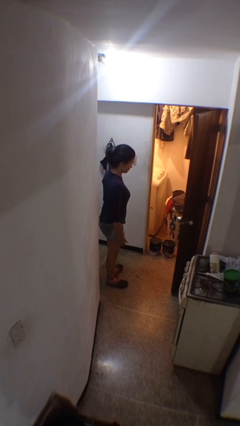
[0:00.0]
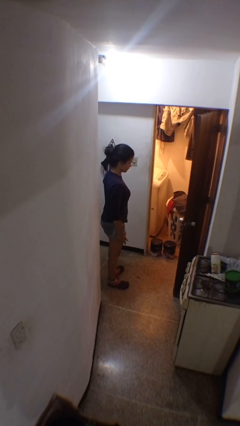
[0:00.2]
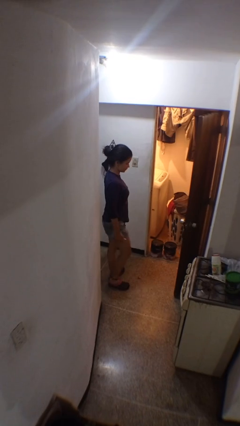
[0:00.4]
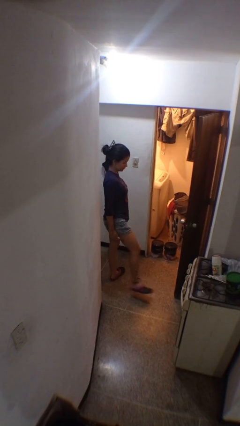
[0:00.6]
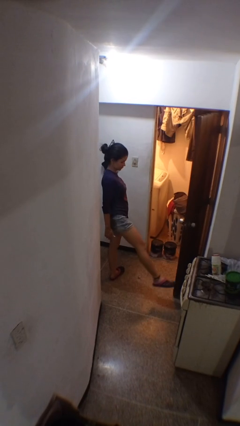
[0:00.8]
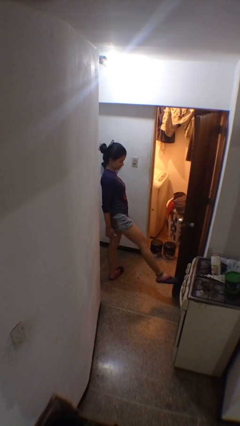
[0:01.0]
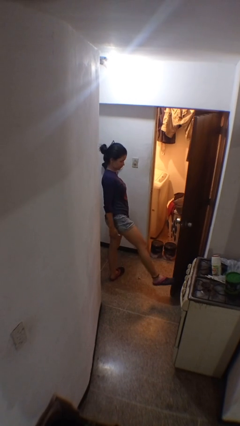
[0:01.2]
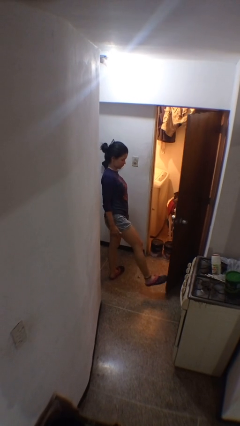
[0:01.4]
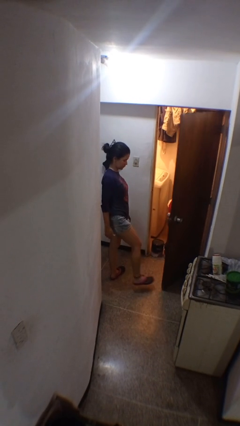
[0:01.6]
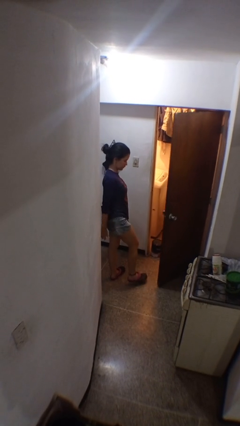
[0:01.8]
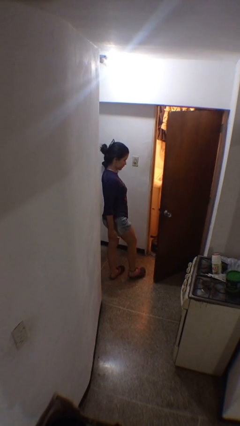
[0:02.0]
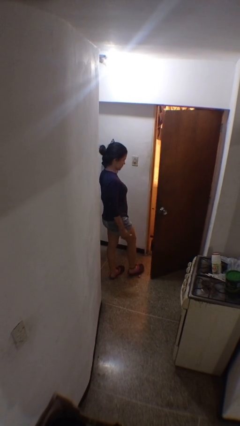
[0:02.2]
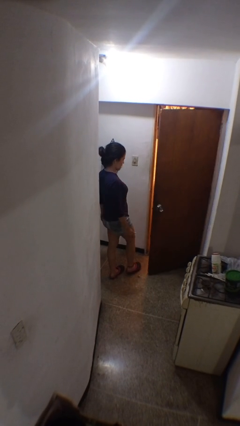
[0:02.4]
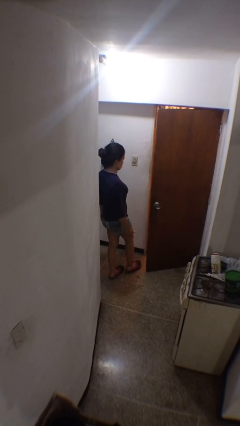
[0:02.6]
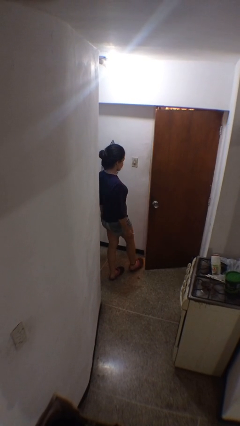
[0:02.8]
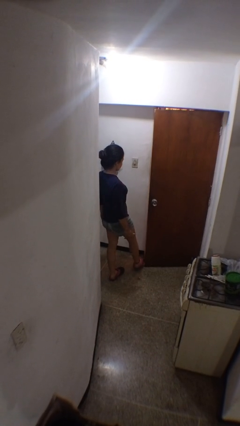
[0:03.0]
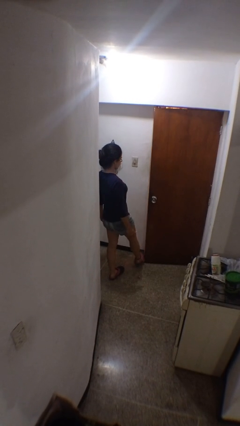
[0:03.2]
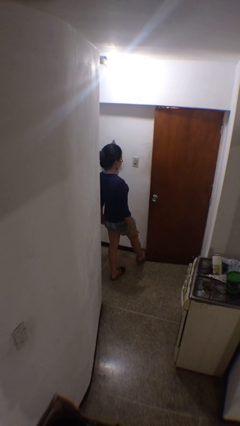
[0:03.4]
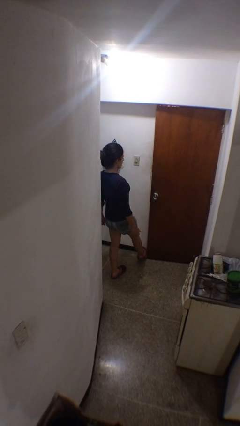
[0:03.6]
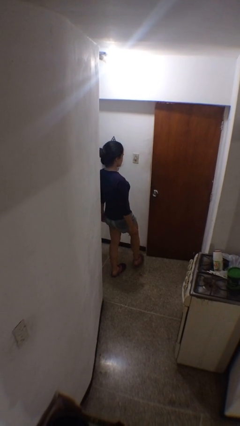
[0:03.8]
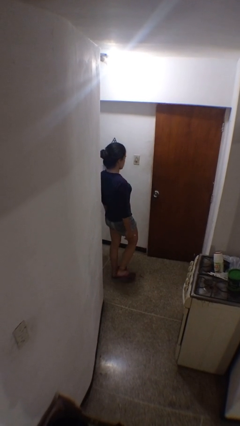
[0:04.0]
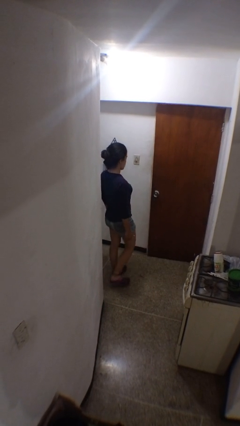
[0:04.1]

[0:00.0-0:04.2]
person closes door with foot

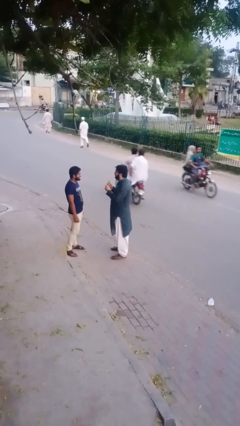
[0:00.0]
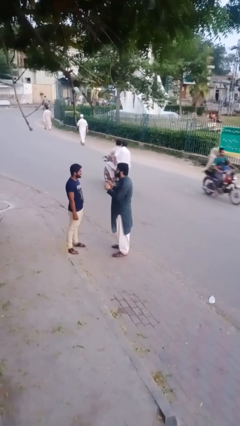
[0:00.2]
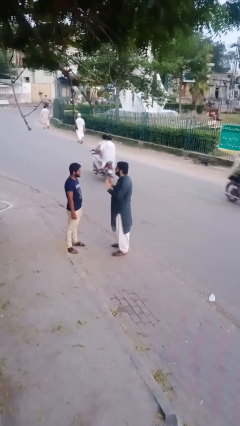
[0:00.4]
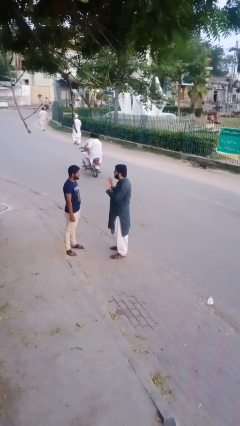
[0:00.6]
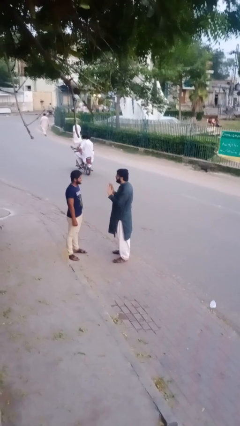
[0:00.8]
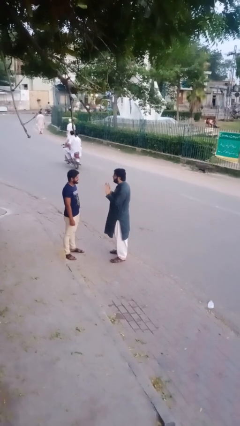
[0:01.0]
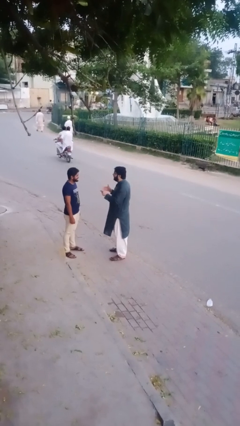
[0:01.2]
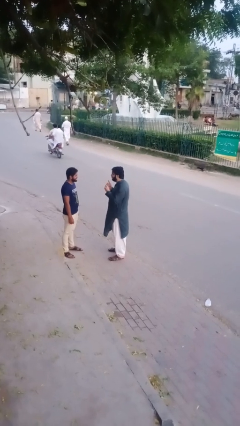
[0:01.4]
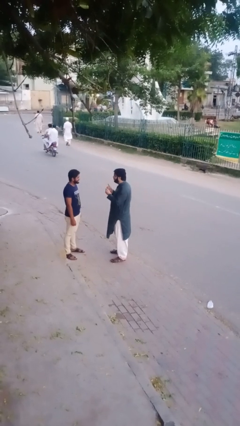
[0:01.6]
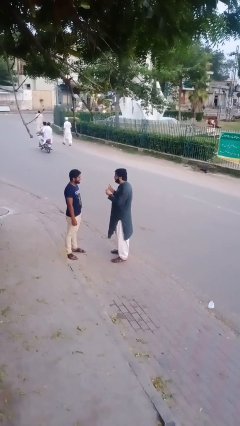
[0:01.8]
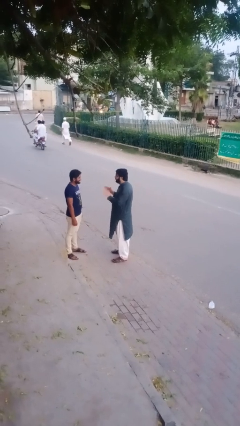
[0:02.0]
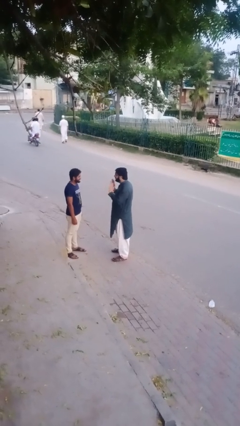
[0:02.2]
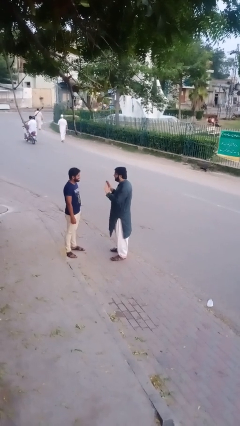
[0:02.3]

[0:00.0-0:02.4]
person talks to person

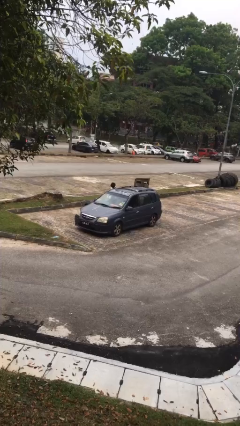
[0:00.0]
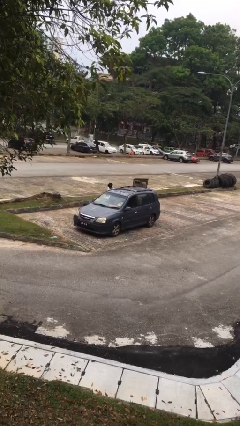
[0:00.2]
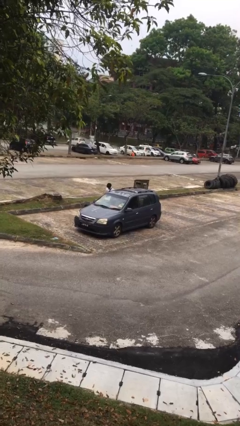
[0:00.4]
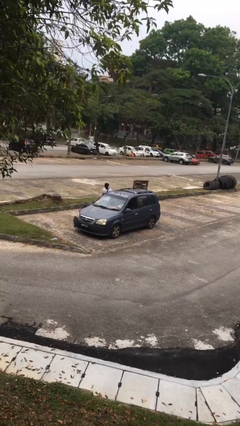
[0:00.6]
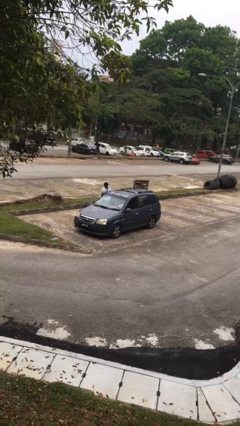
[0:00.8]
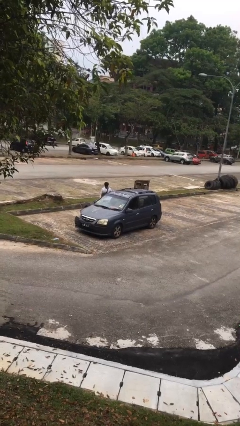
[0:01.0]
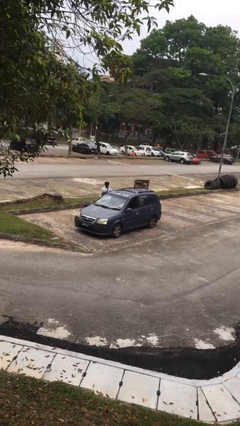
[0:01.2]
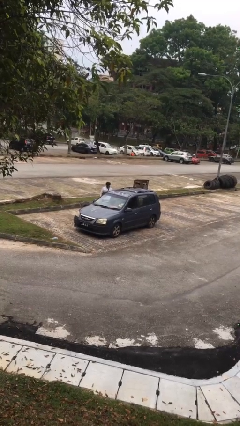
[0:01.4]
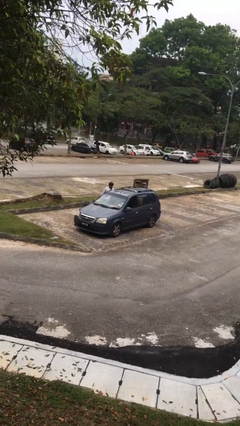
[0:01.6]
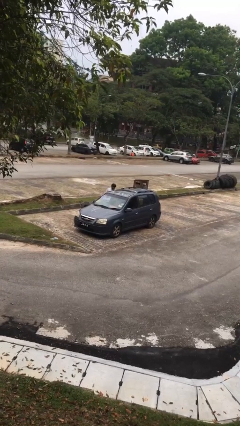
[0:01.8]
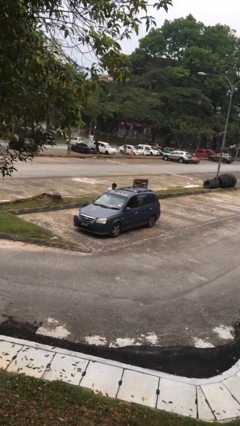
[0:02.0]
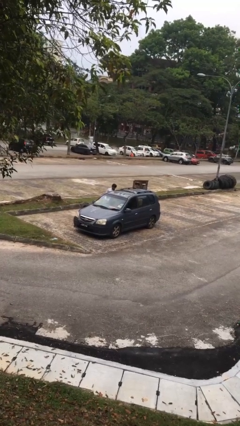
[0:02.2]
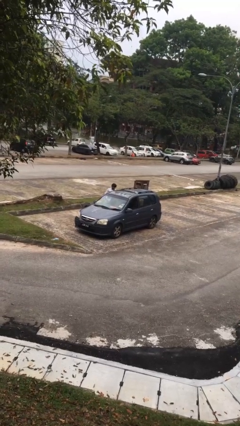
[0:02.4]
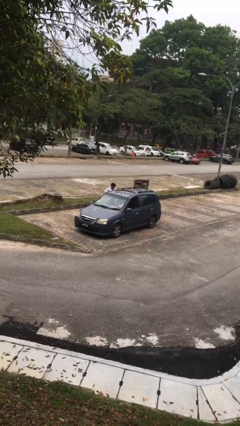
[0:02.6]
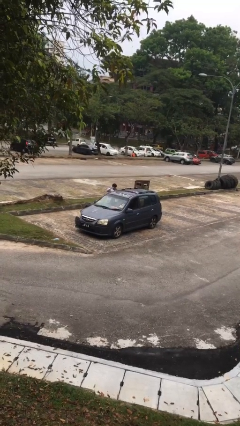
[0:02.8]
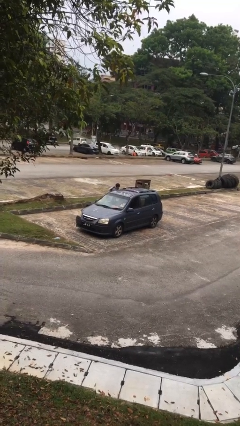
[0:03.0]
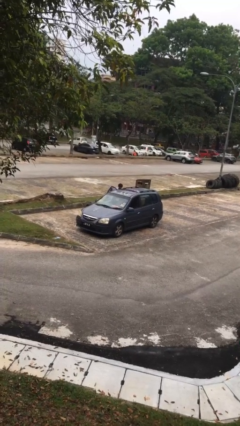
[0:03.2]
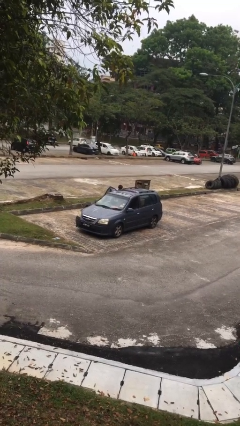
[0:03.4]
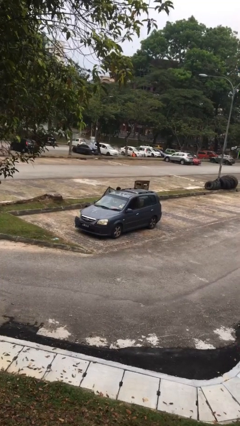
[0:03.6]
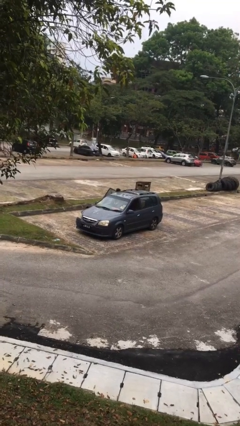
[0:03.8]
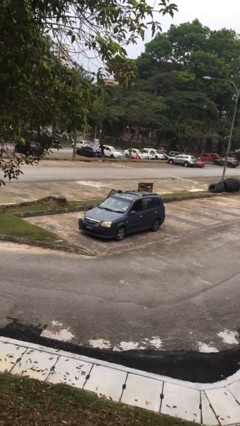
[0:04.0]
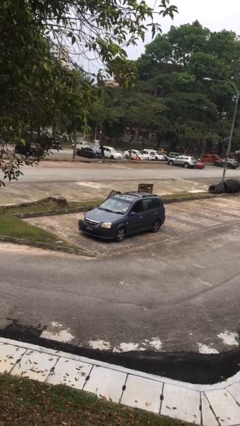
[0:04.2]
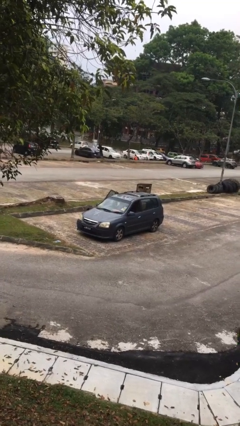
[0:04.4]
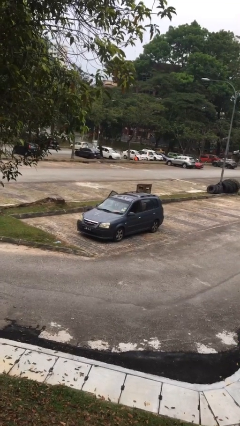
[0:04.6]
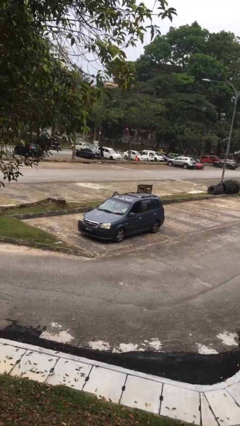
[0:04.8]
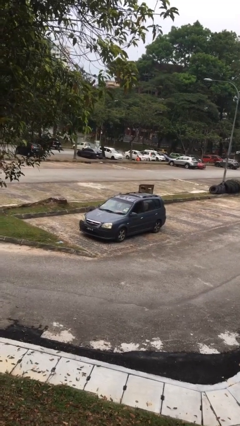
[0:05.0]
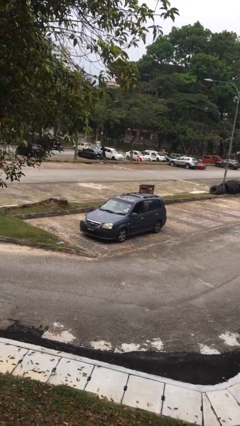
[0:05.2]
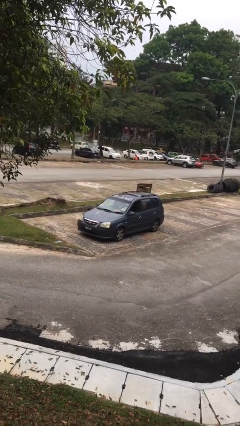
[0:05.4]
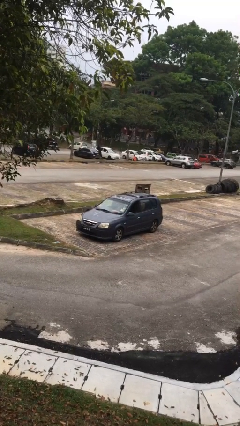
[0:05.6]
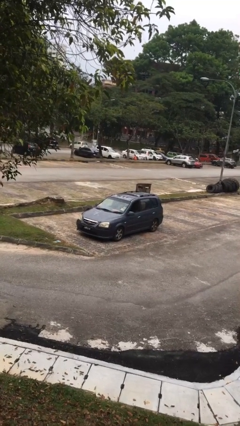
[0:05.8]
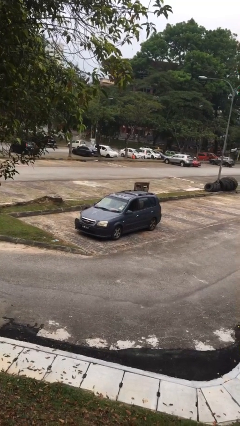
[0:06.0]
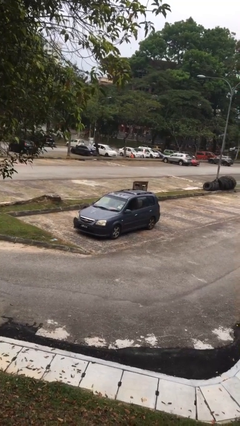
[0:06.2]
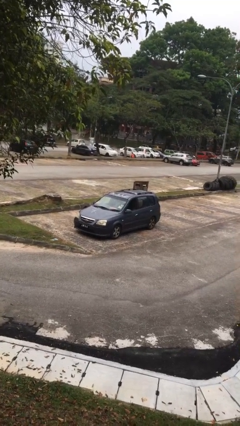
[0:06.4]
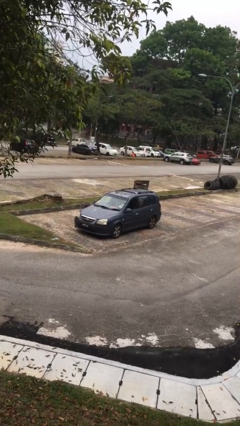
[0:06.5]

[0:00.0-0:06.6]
car picks up person

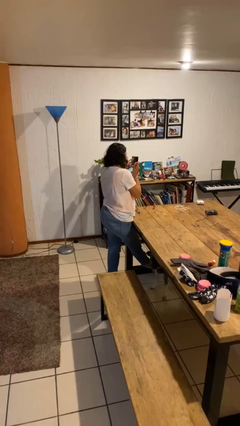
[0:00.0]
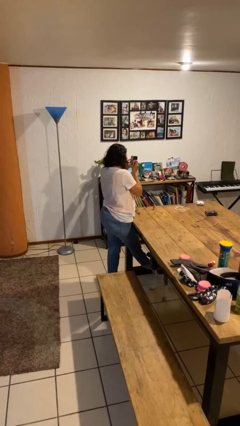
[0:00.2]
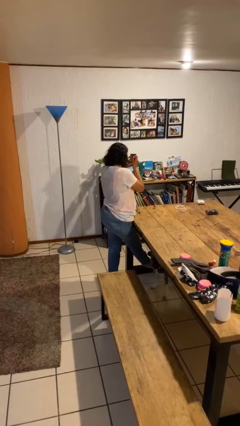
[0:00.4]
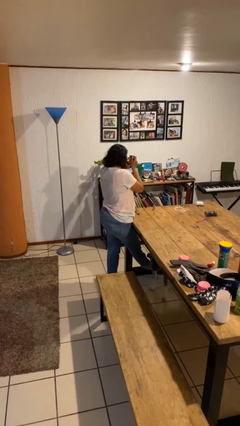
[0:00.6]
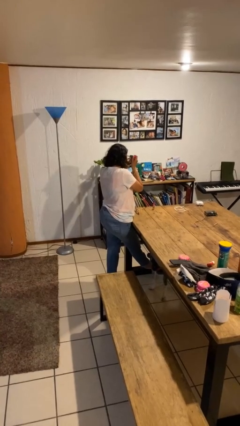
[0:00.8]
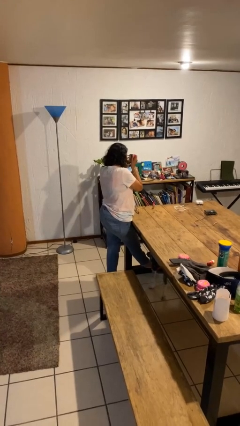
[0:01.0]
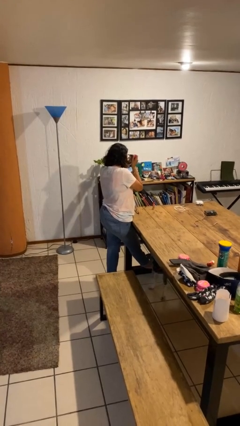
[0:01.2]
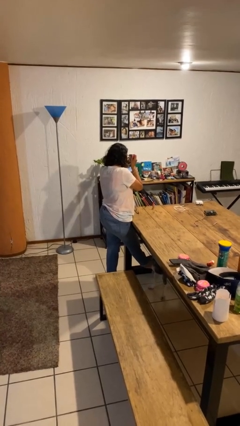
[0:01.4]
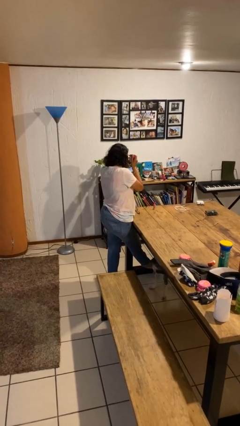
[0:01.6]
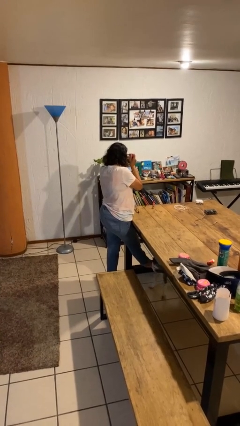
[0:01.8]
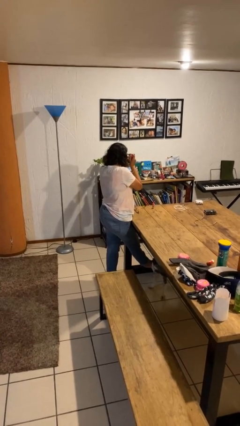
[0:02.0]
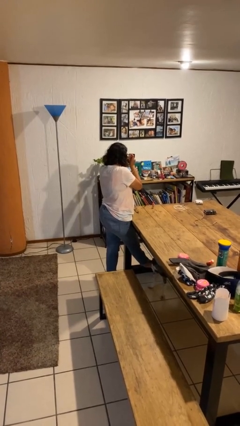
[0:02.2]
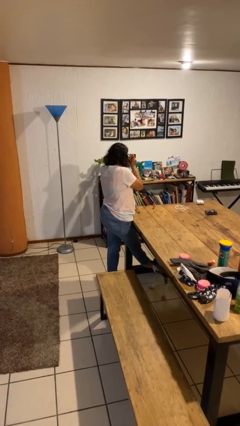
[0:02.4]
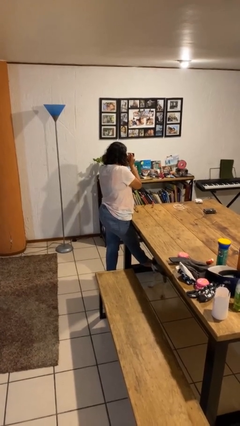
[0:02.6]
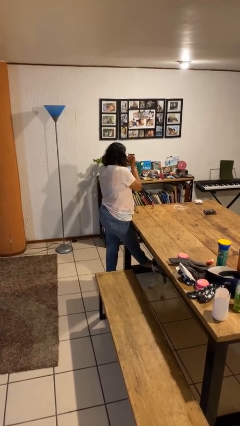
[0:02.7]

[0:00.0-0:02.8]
person applies eye makeup

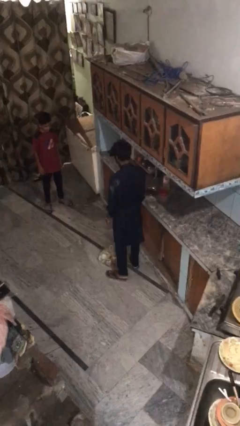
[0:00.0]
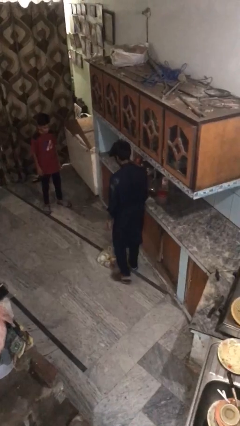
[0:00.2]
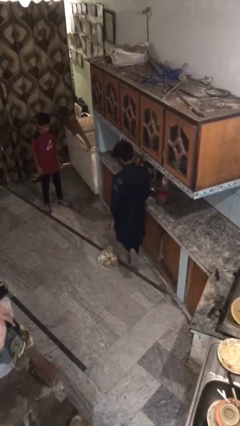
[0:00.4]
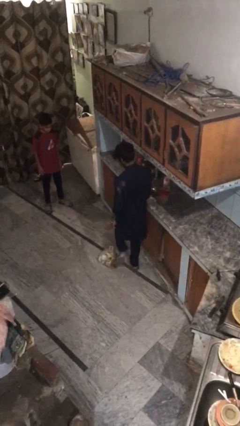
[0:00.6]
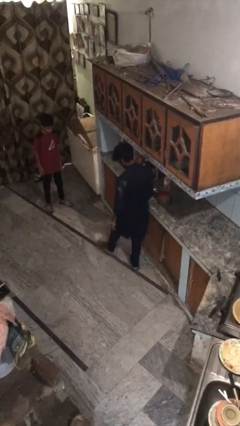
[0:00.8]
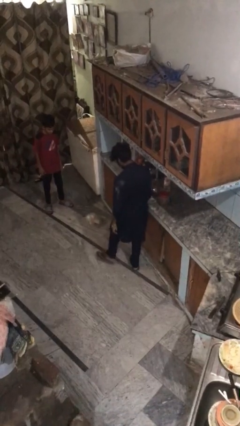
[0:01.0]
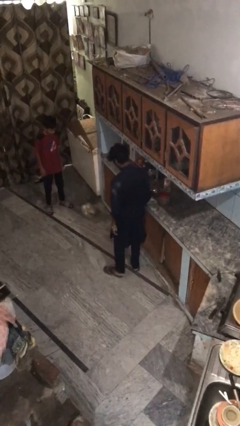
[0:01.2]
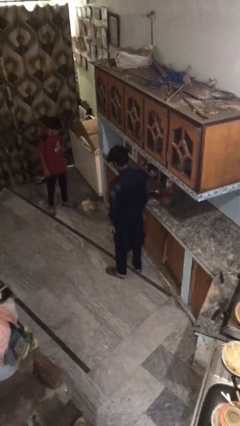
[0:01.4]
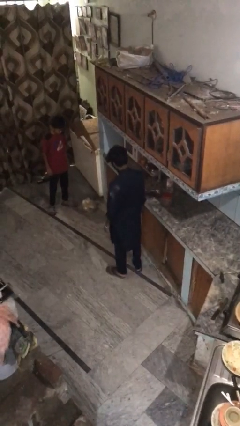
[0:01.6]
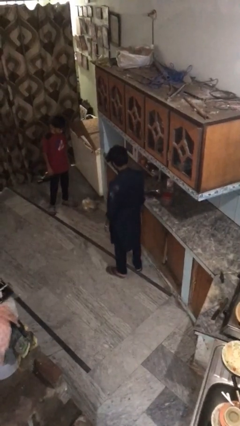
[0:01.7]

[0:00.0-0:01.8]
person kicks object to person

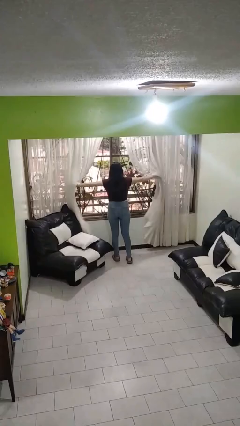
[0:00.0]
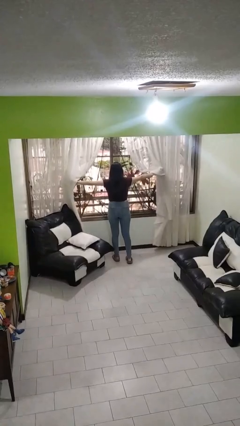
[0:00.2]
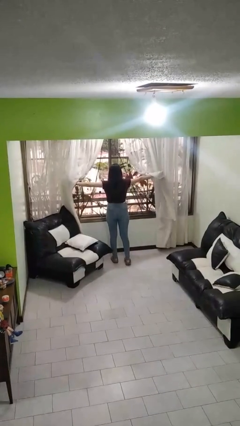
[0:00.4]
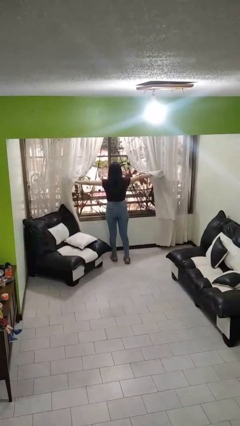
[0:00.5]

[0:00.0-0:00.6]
person opens curtains
